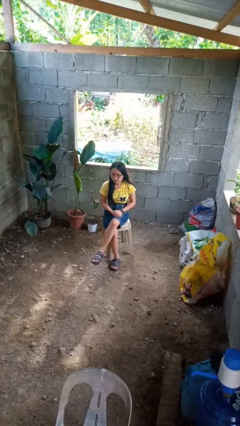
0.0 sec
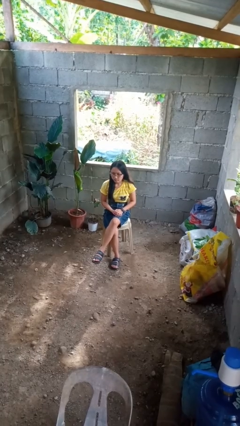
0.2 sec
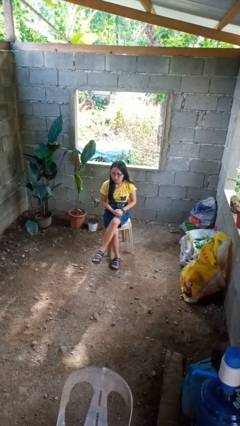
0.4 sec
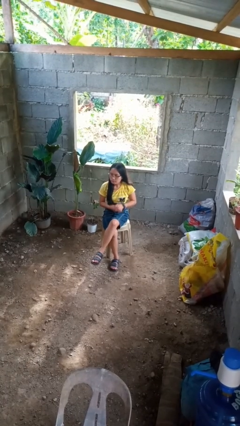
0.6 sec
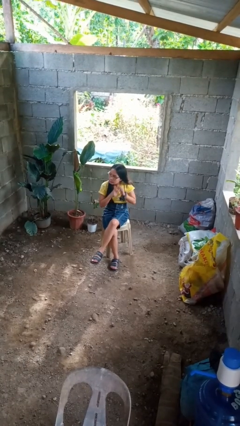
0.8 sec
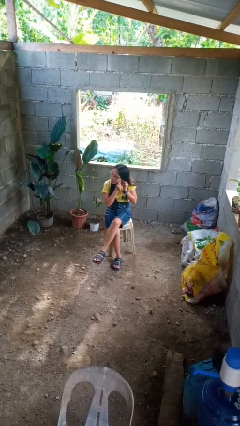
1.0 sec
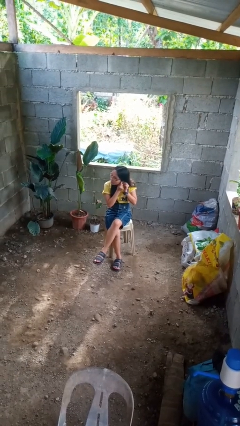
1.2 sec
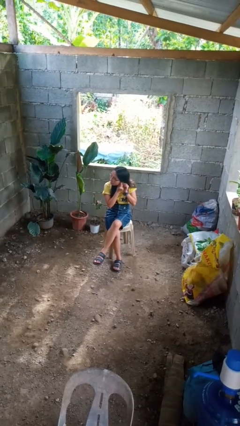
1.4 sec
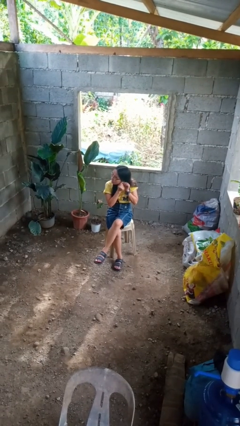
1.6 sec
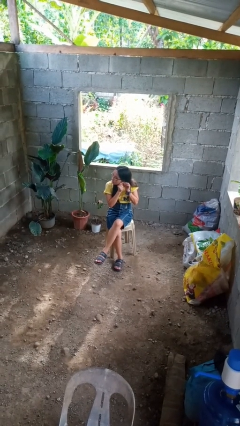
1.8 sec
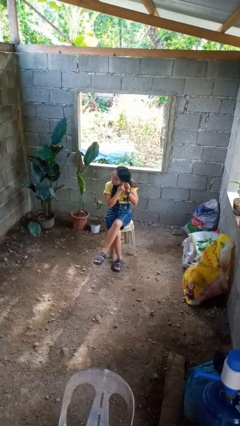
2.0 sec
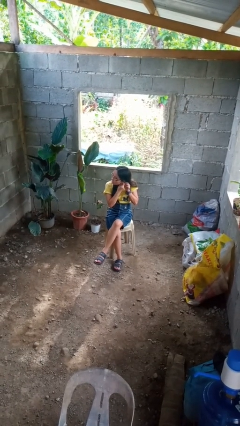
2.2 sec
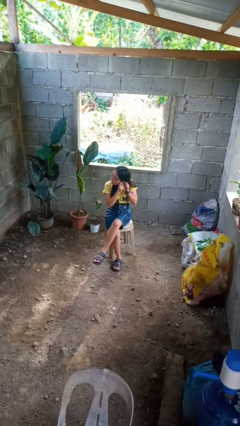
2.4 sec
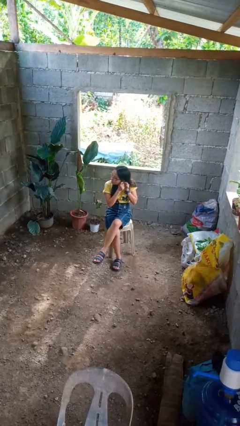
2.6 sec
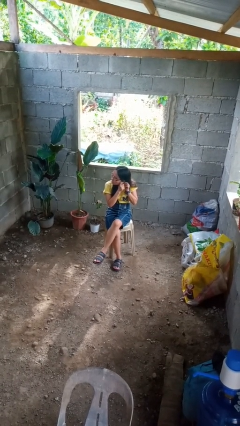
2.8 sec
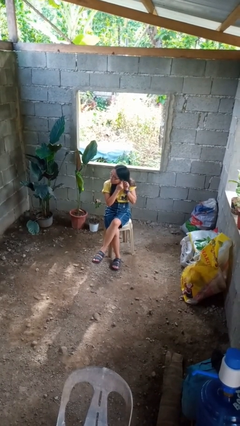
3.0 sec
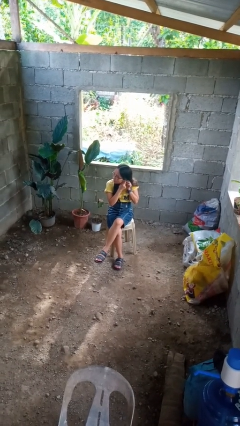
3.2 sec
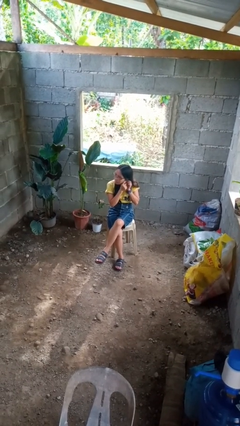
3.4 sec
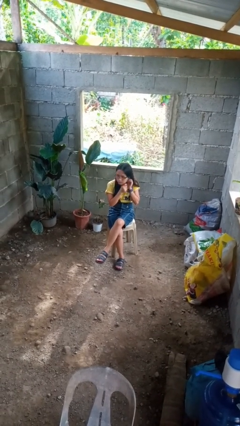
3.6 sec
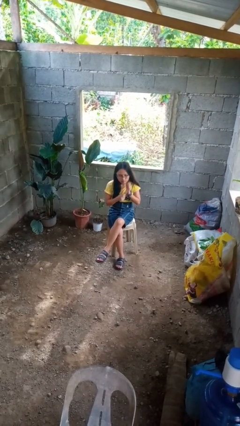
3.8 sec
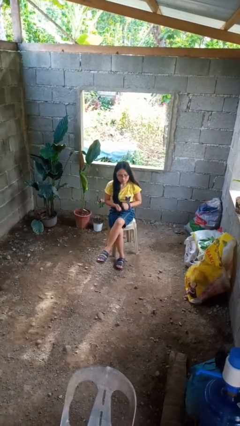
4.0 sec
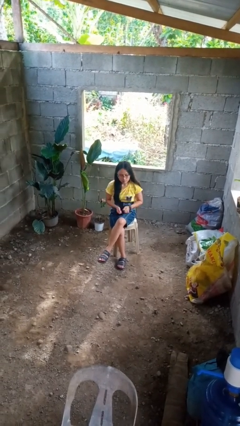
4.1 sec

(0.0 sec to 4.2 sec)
person puts on earrings

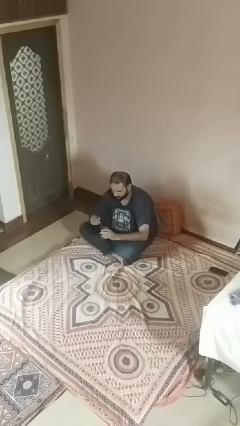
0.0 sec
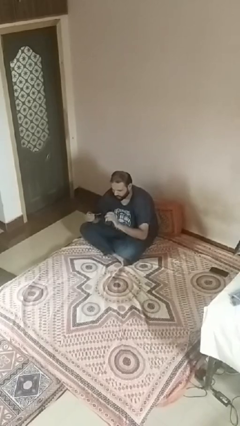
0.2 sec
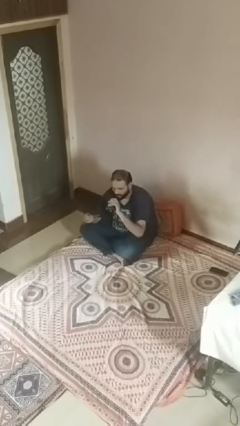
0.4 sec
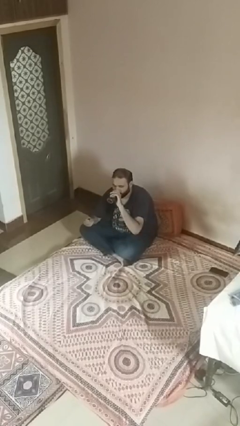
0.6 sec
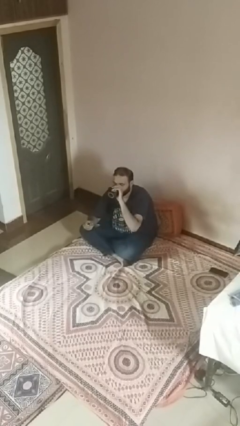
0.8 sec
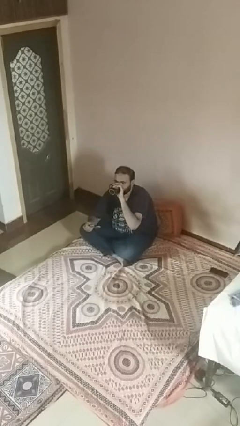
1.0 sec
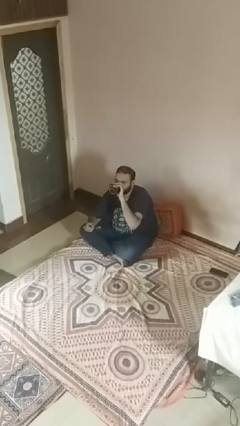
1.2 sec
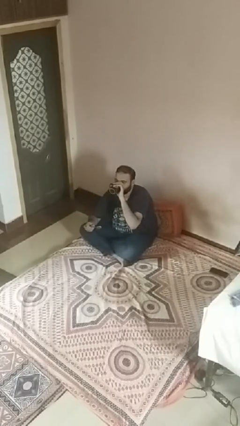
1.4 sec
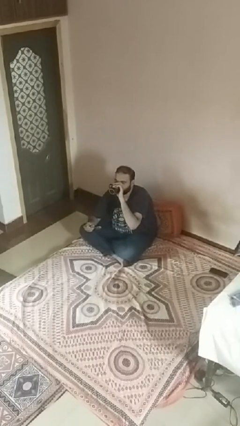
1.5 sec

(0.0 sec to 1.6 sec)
person drinks from mug

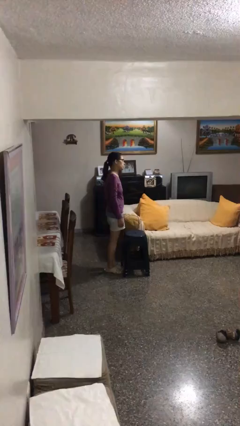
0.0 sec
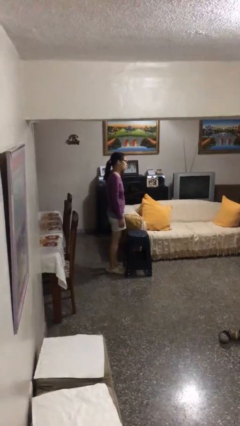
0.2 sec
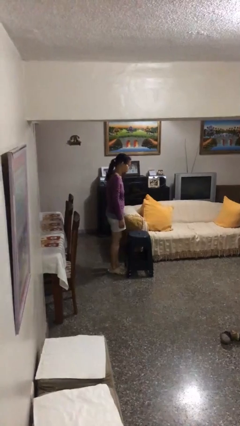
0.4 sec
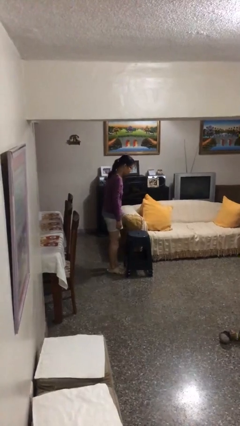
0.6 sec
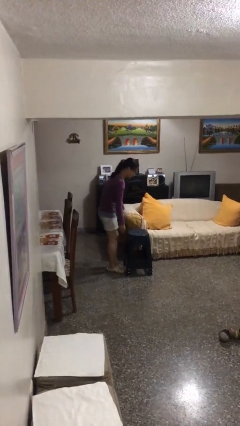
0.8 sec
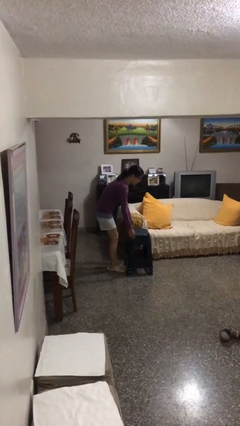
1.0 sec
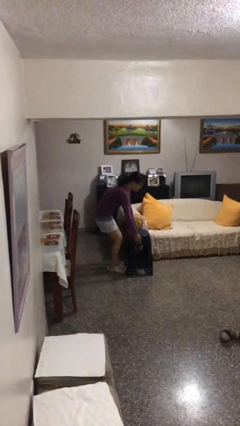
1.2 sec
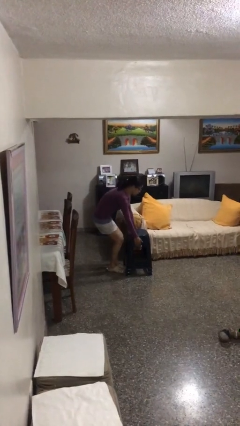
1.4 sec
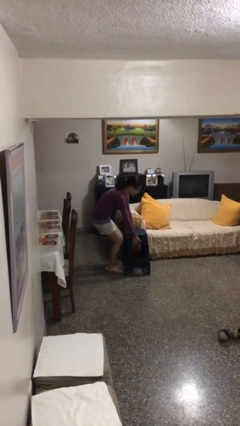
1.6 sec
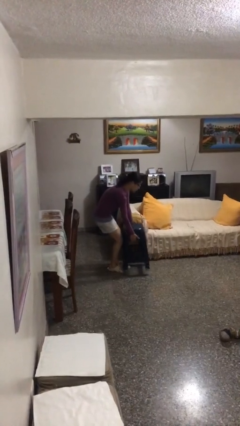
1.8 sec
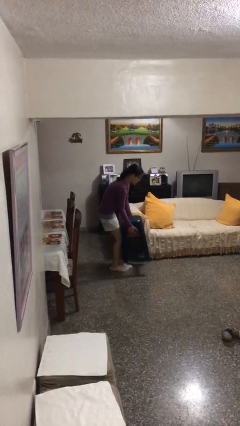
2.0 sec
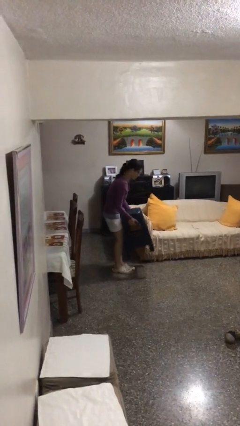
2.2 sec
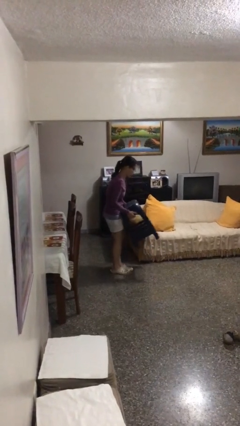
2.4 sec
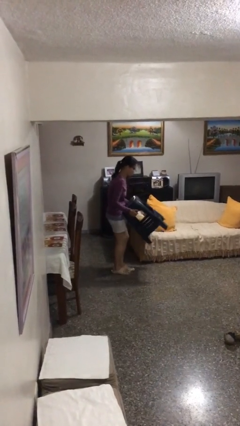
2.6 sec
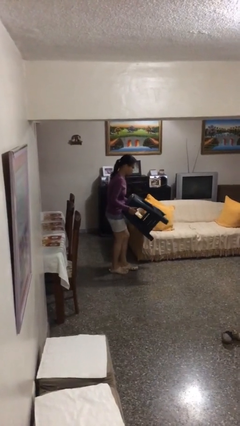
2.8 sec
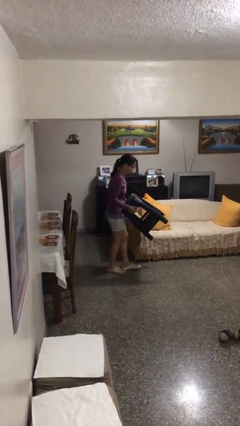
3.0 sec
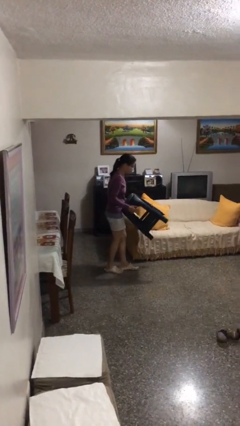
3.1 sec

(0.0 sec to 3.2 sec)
person picks up object from floor

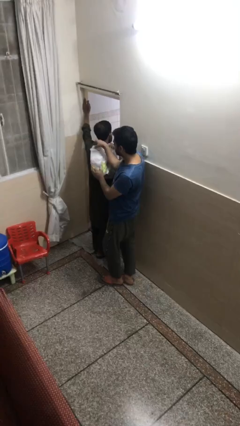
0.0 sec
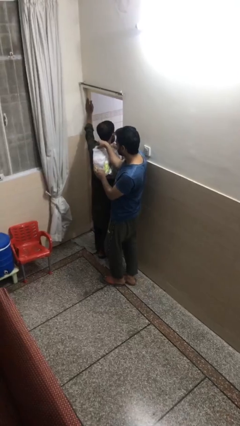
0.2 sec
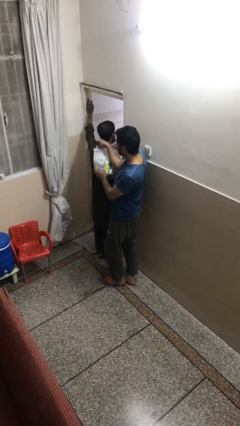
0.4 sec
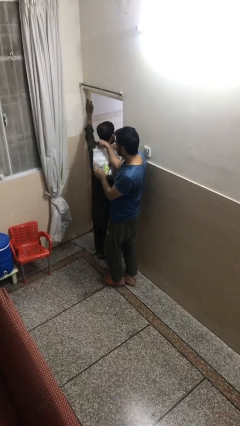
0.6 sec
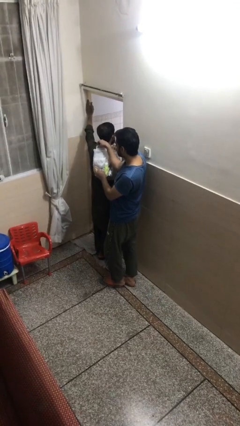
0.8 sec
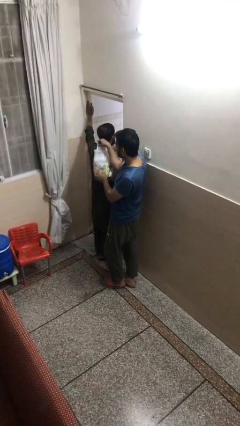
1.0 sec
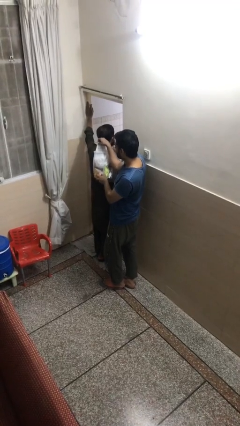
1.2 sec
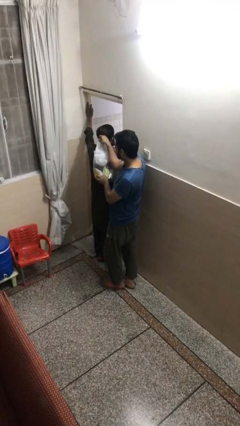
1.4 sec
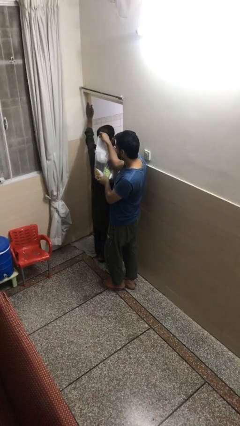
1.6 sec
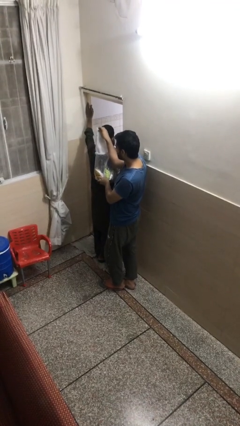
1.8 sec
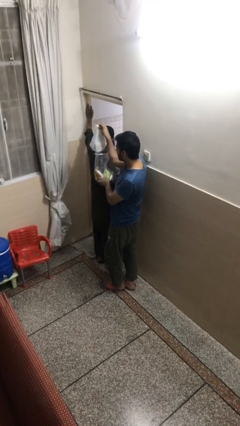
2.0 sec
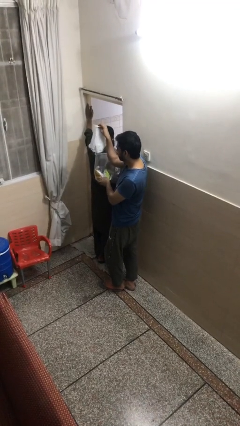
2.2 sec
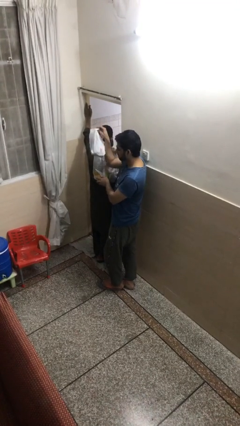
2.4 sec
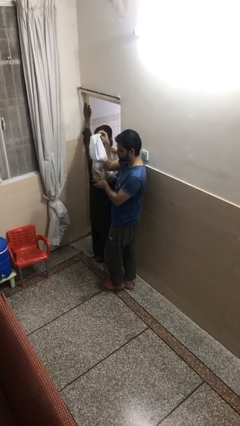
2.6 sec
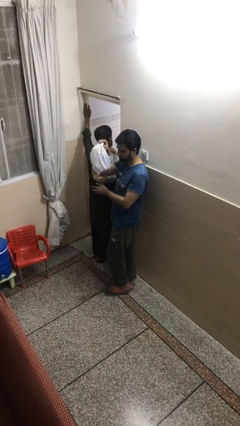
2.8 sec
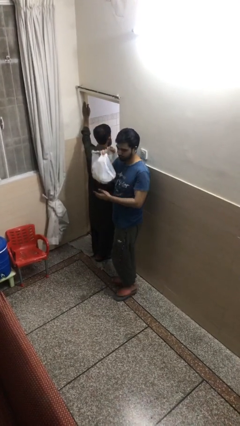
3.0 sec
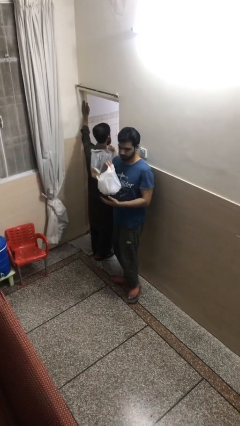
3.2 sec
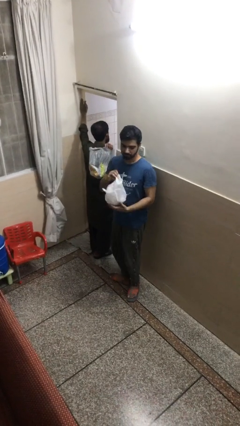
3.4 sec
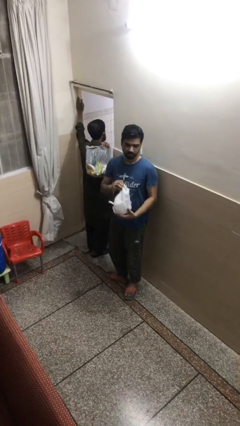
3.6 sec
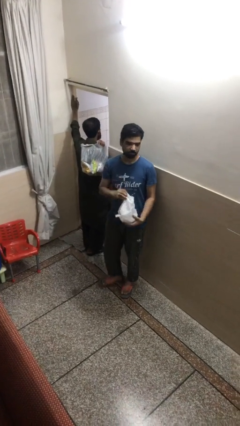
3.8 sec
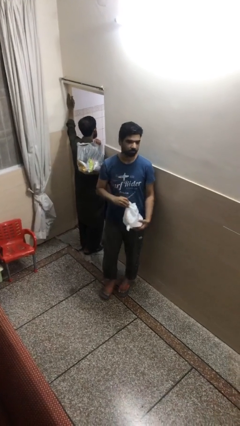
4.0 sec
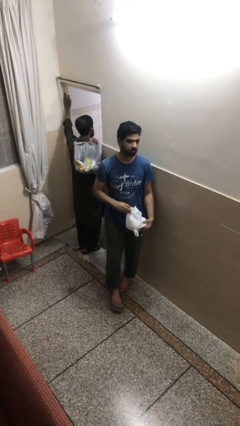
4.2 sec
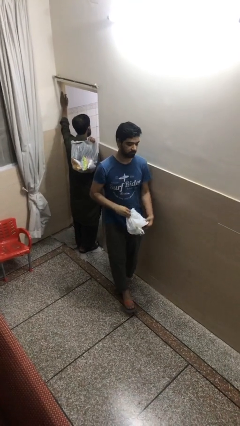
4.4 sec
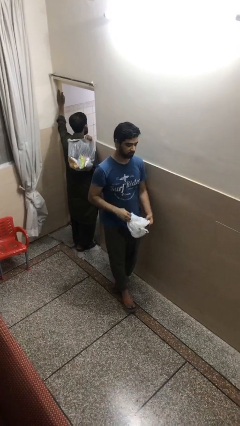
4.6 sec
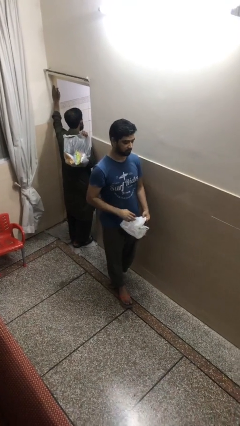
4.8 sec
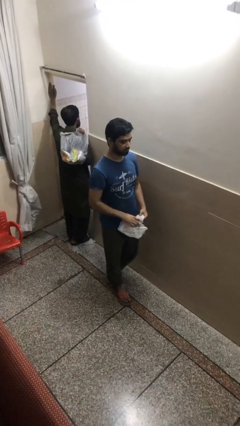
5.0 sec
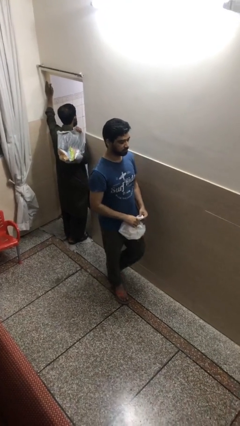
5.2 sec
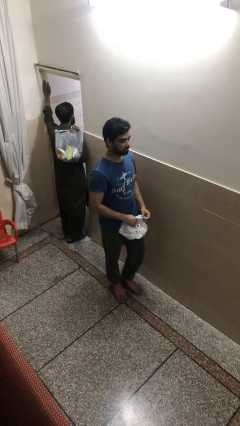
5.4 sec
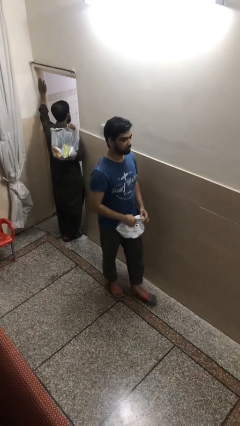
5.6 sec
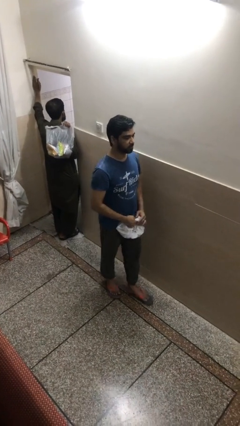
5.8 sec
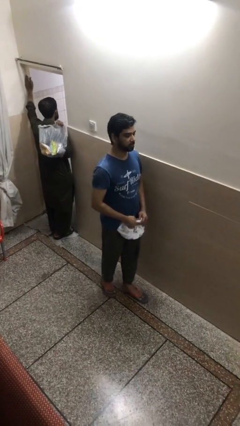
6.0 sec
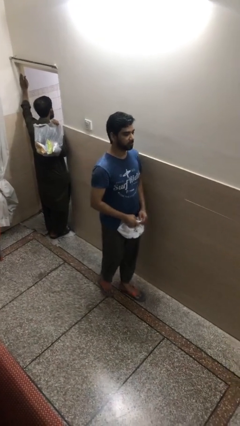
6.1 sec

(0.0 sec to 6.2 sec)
person steals object from person

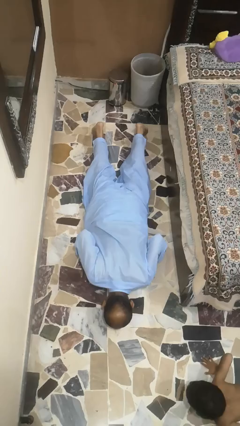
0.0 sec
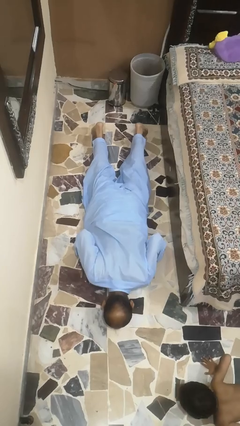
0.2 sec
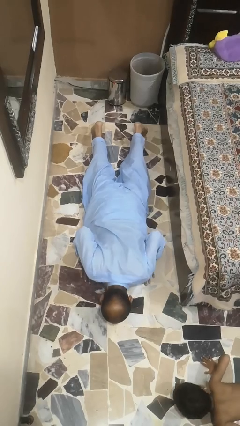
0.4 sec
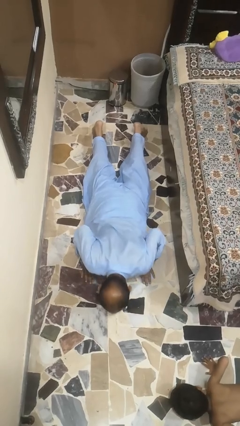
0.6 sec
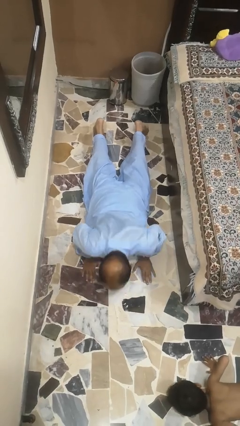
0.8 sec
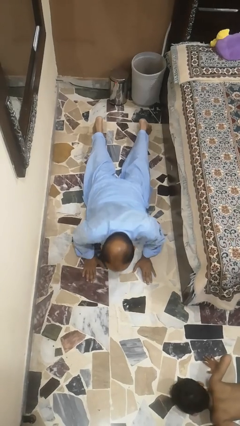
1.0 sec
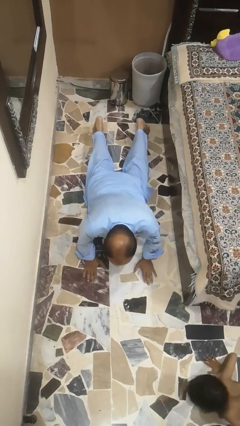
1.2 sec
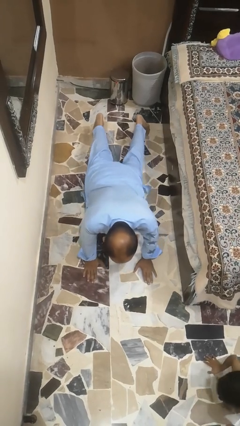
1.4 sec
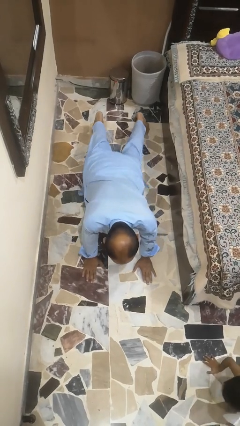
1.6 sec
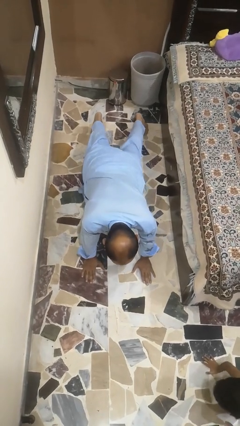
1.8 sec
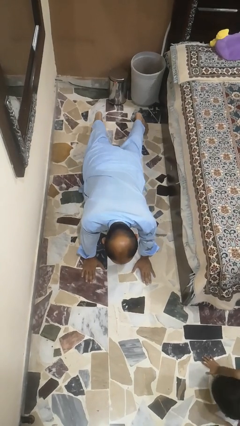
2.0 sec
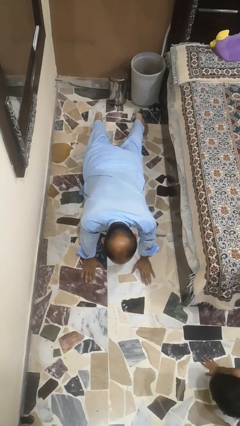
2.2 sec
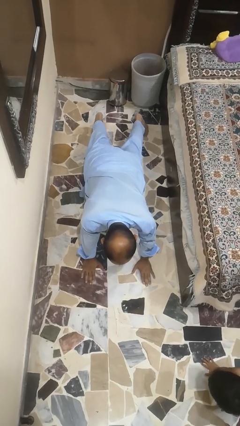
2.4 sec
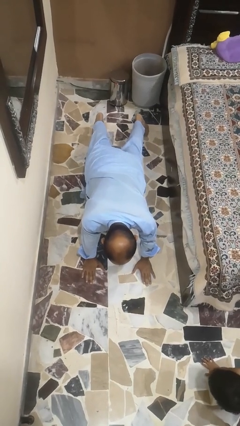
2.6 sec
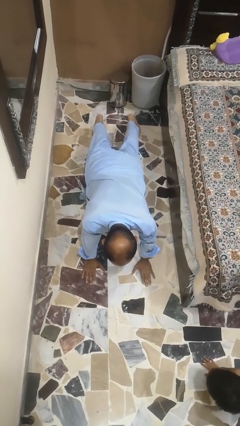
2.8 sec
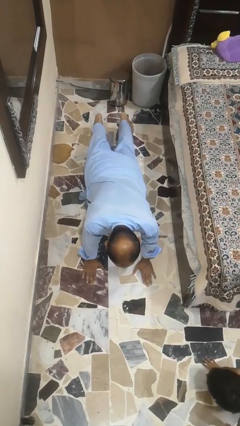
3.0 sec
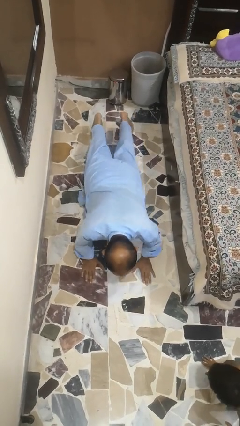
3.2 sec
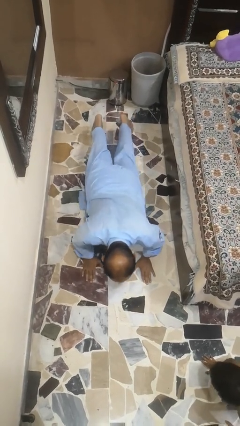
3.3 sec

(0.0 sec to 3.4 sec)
person exercises with pushup
